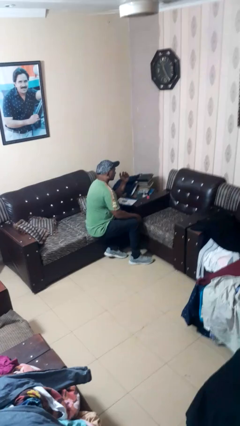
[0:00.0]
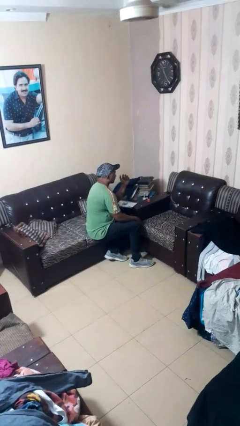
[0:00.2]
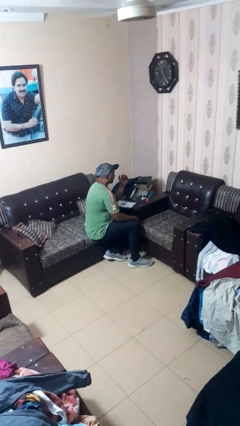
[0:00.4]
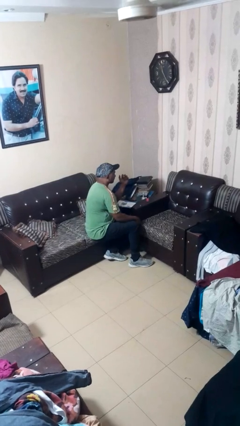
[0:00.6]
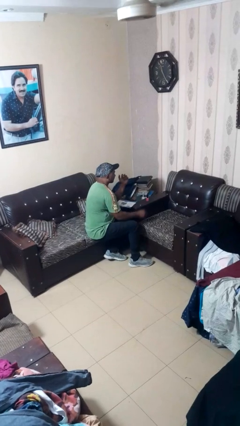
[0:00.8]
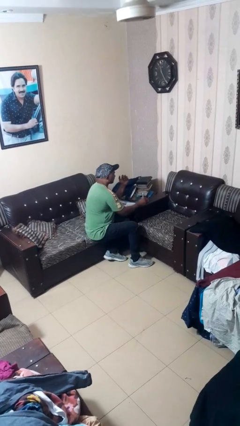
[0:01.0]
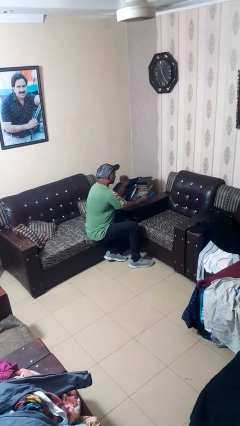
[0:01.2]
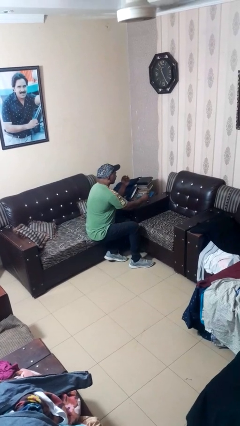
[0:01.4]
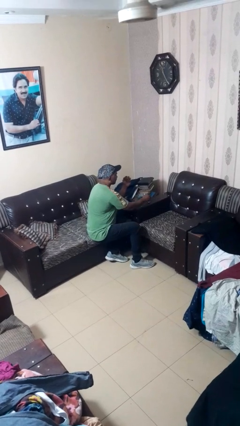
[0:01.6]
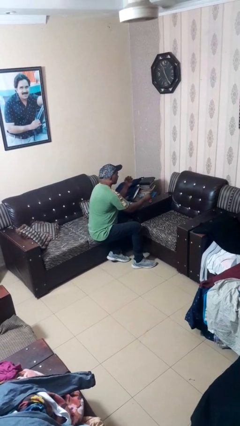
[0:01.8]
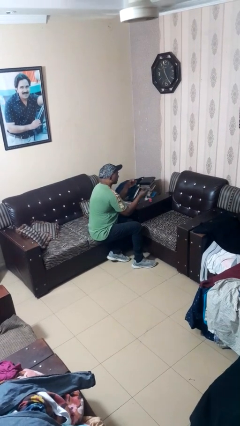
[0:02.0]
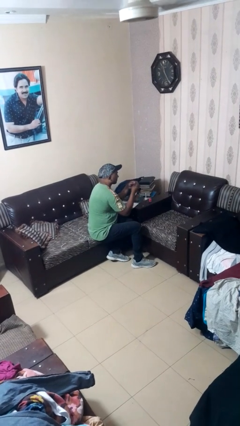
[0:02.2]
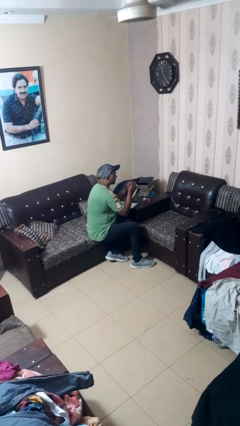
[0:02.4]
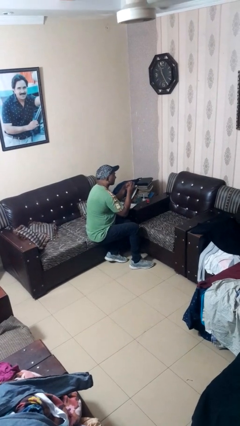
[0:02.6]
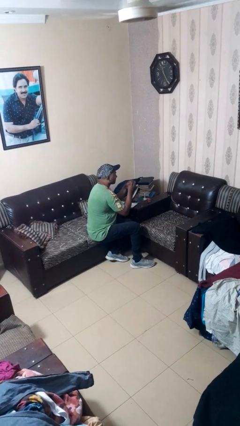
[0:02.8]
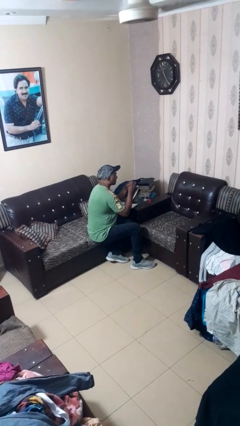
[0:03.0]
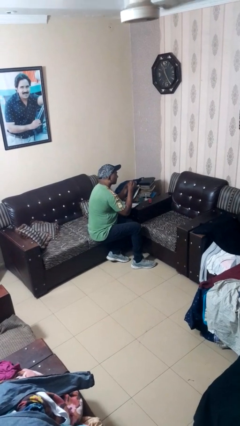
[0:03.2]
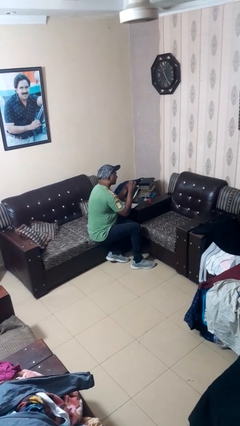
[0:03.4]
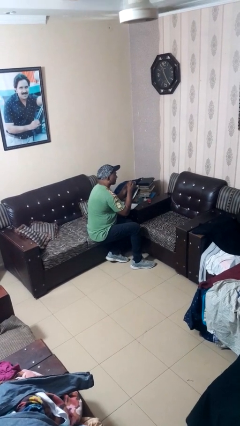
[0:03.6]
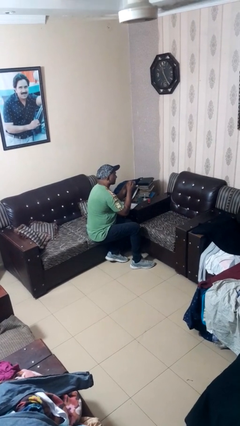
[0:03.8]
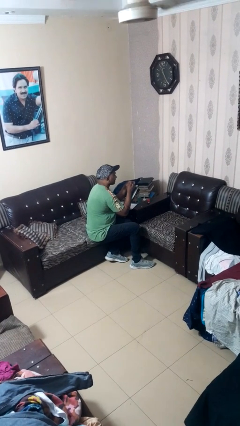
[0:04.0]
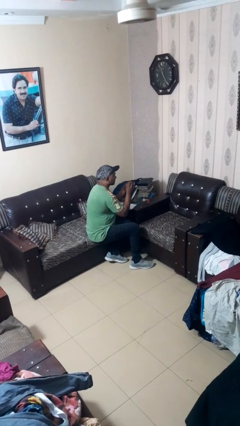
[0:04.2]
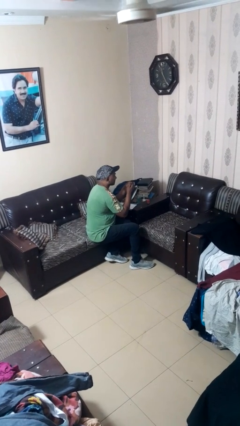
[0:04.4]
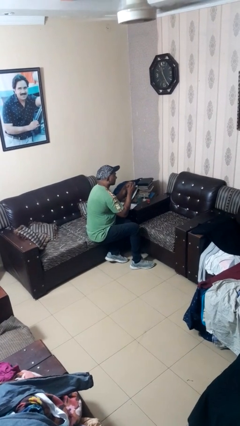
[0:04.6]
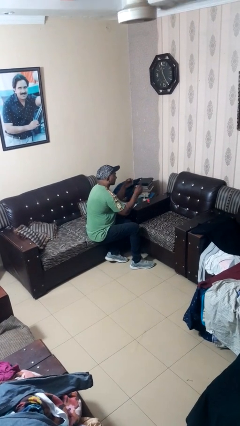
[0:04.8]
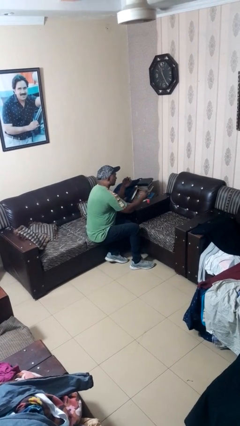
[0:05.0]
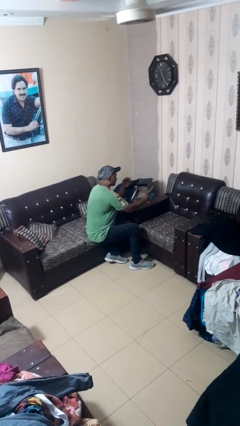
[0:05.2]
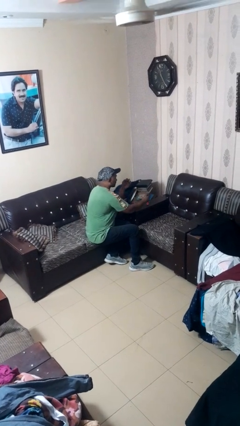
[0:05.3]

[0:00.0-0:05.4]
person paints fingernails

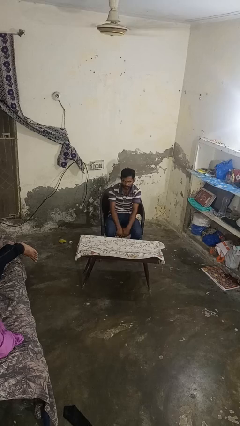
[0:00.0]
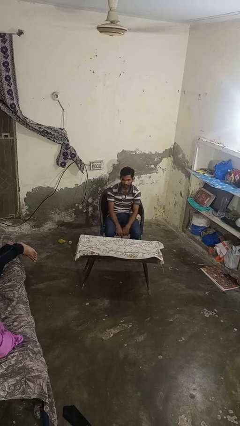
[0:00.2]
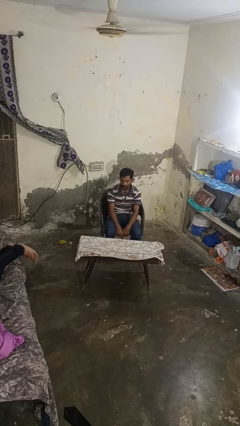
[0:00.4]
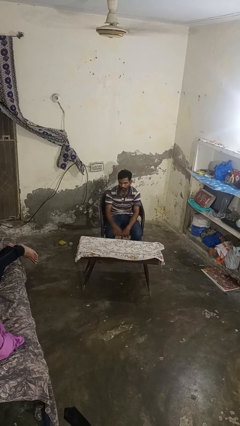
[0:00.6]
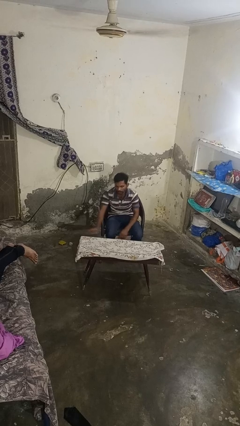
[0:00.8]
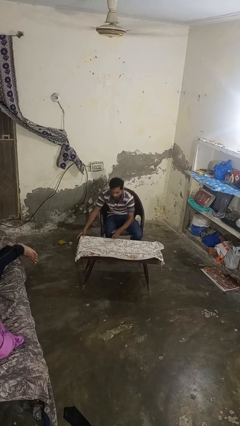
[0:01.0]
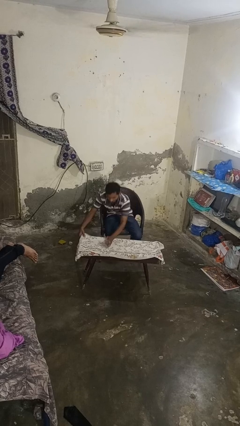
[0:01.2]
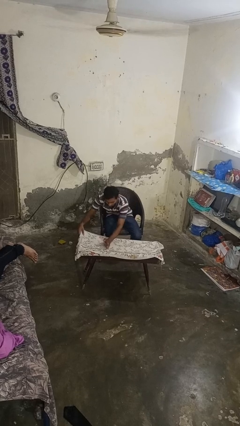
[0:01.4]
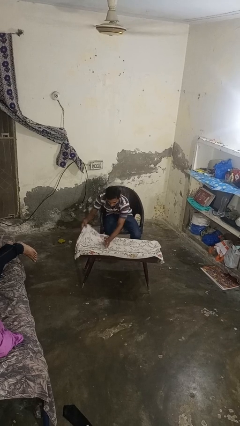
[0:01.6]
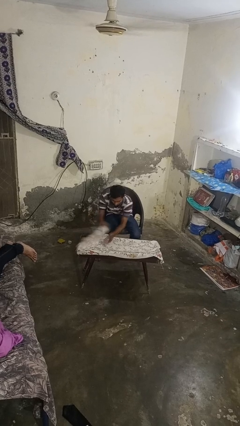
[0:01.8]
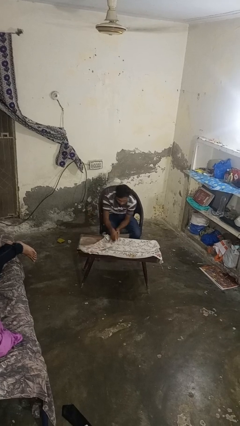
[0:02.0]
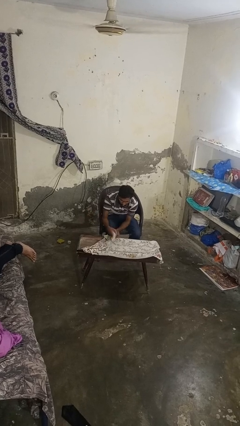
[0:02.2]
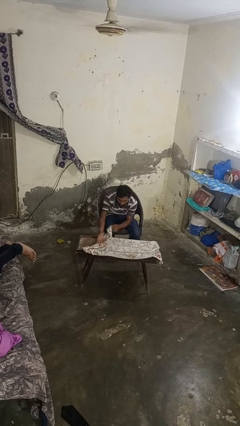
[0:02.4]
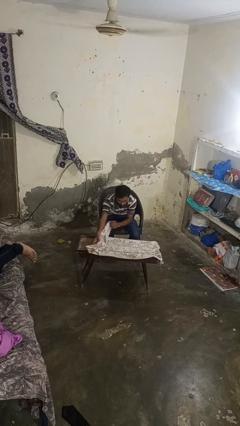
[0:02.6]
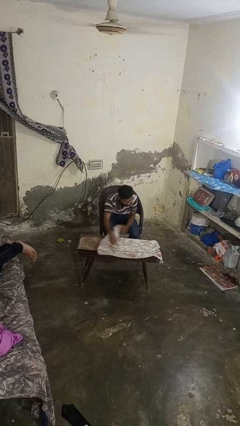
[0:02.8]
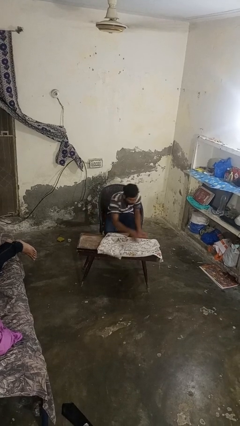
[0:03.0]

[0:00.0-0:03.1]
person folds tablecloth

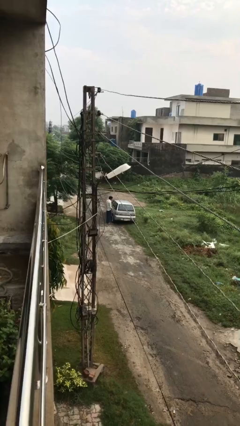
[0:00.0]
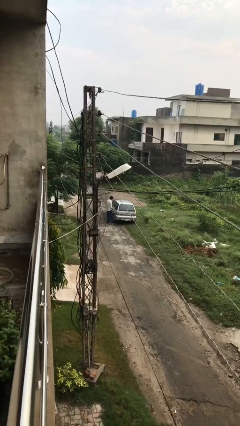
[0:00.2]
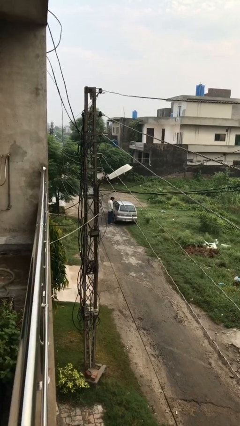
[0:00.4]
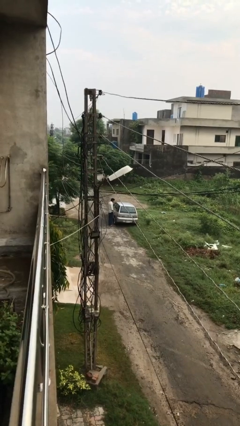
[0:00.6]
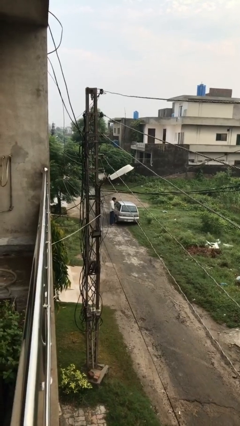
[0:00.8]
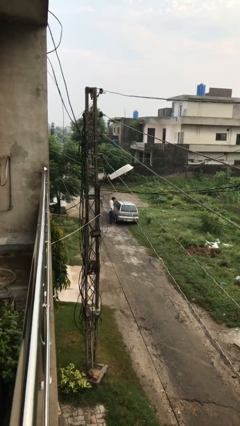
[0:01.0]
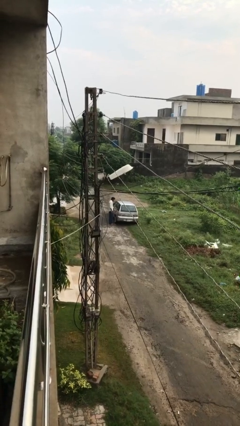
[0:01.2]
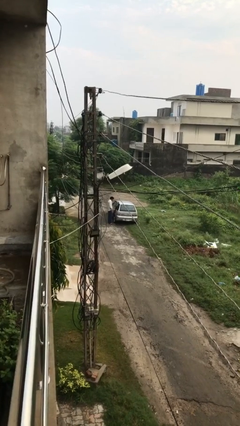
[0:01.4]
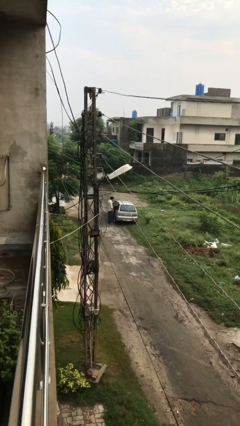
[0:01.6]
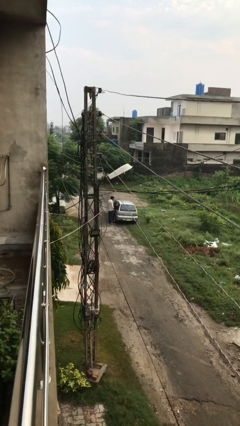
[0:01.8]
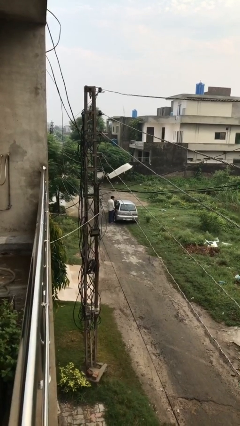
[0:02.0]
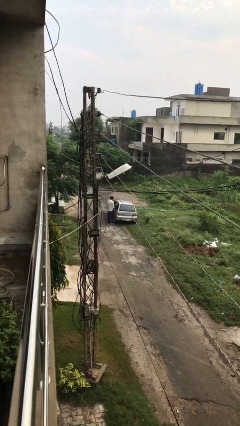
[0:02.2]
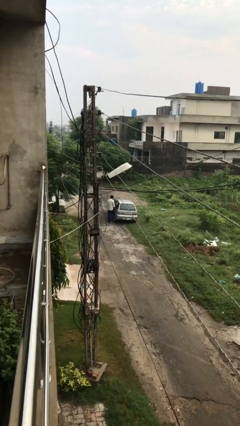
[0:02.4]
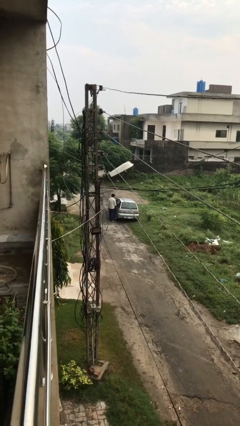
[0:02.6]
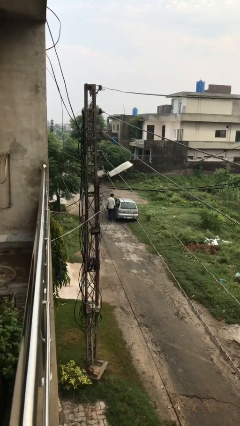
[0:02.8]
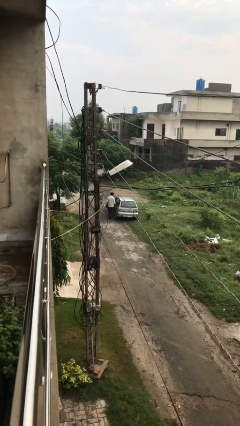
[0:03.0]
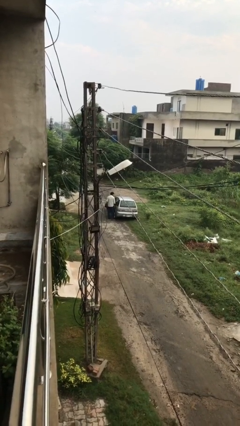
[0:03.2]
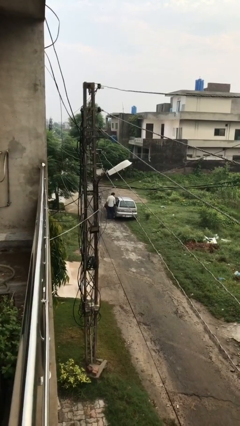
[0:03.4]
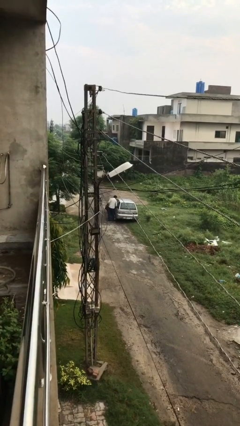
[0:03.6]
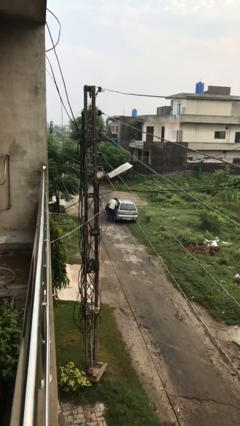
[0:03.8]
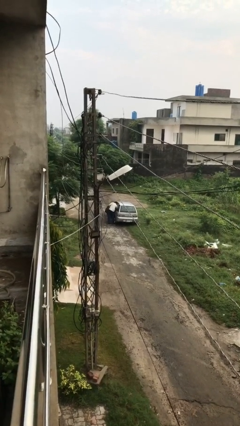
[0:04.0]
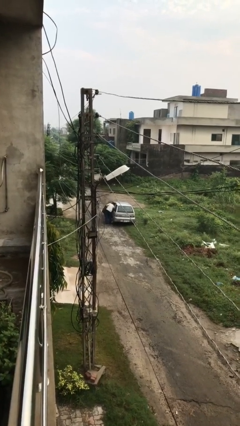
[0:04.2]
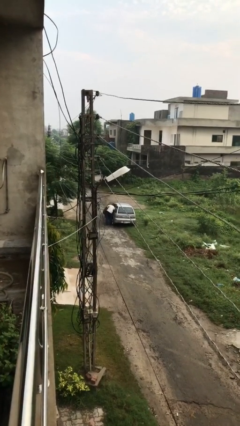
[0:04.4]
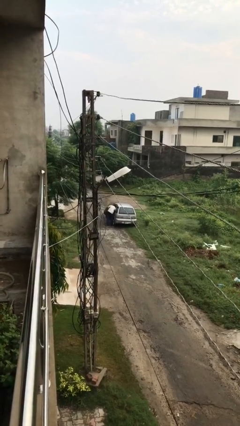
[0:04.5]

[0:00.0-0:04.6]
person opens car door

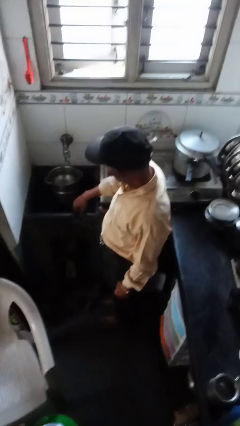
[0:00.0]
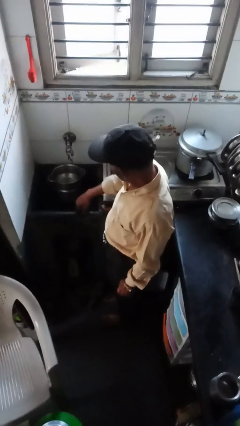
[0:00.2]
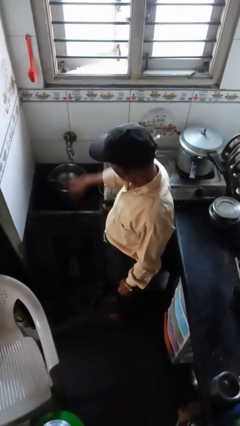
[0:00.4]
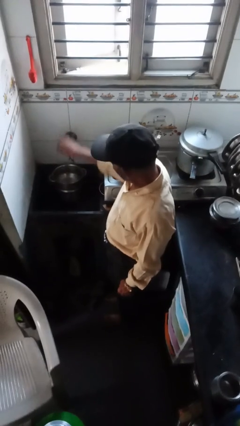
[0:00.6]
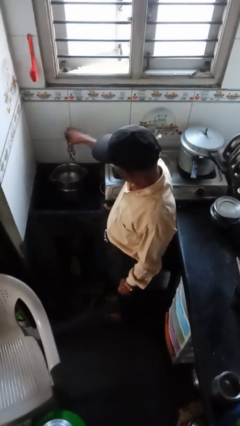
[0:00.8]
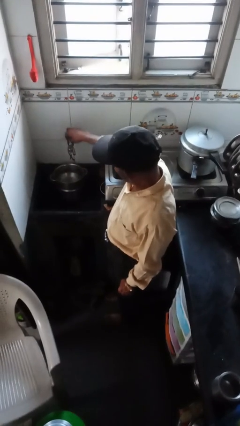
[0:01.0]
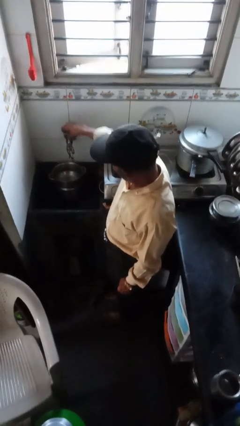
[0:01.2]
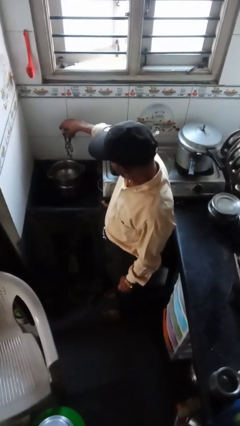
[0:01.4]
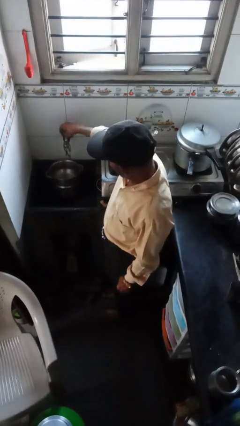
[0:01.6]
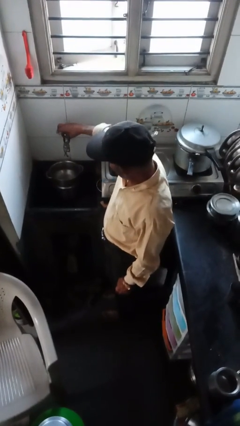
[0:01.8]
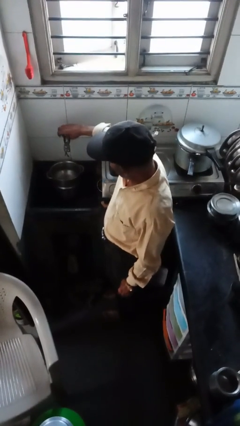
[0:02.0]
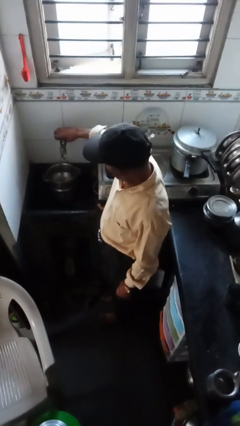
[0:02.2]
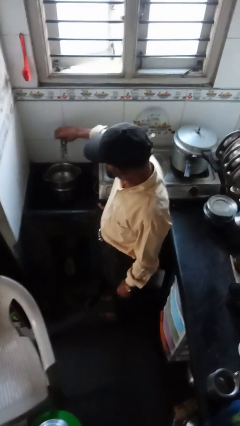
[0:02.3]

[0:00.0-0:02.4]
person turns on faucet

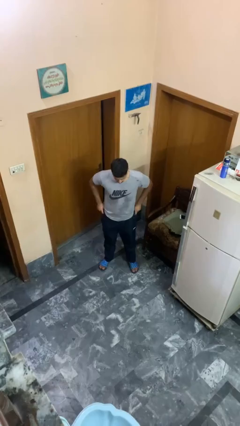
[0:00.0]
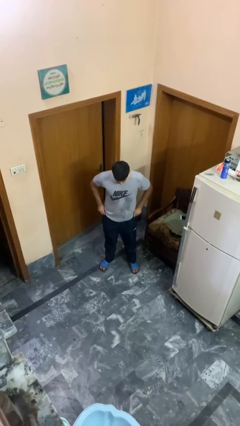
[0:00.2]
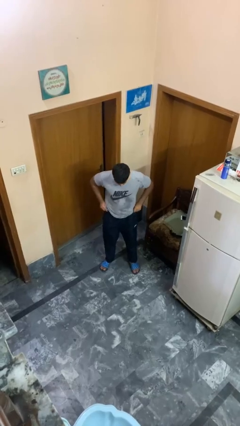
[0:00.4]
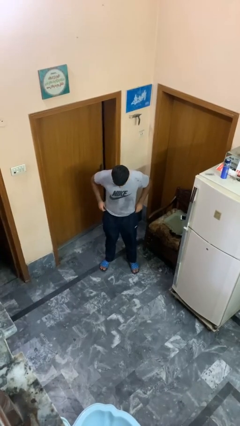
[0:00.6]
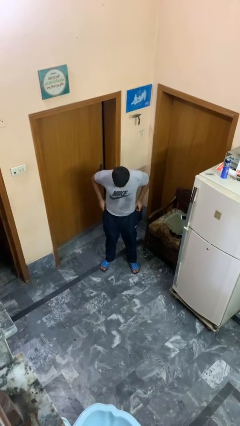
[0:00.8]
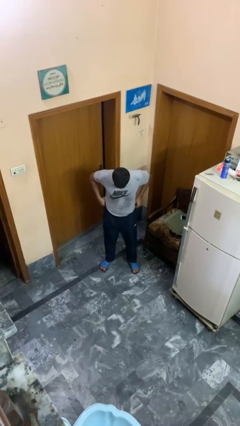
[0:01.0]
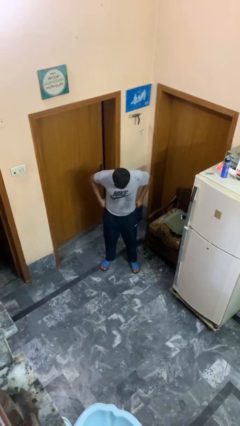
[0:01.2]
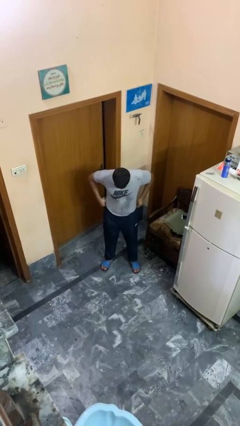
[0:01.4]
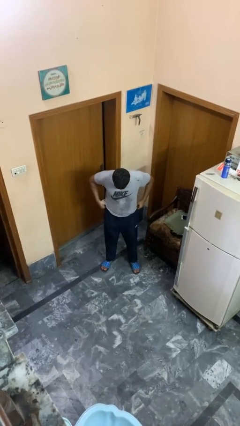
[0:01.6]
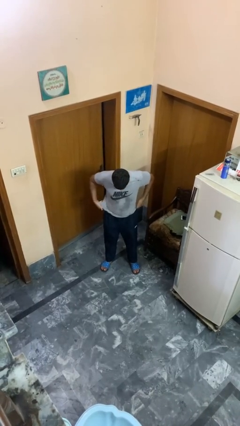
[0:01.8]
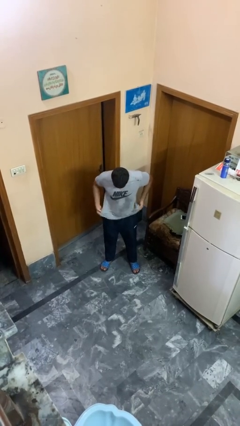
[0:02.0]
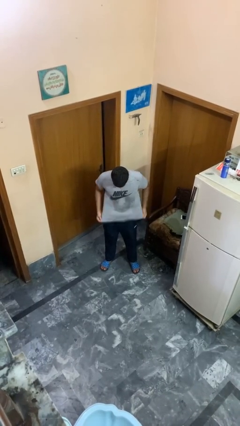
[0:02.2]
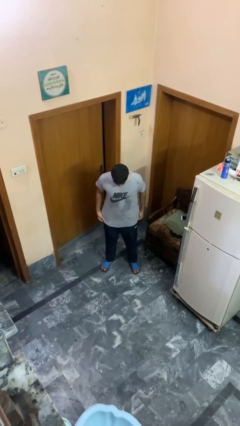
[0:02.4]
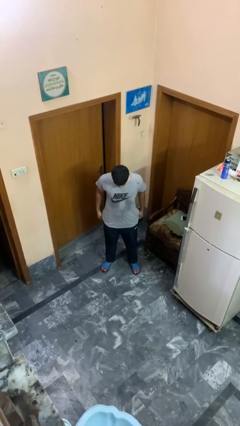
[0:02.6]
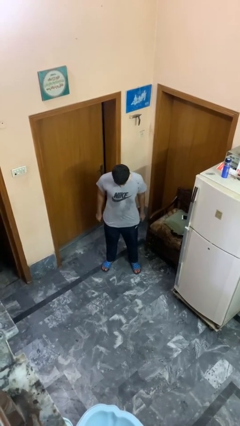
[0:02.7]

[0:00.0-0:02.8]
person hikes up pants
